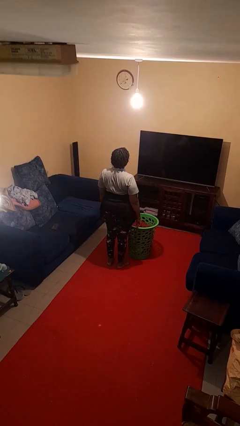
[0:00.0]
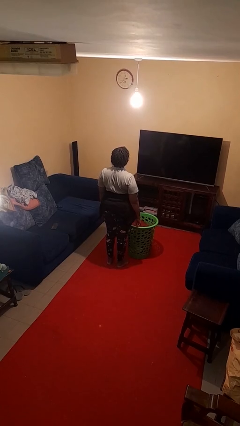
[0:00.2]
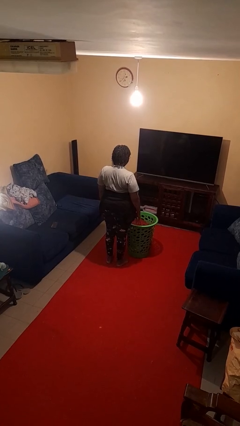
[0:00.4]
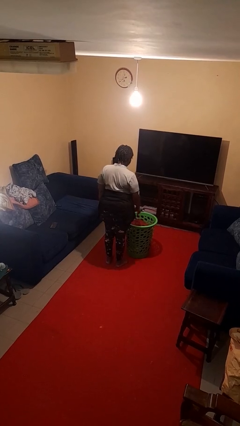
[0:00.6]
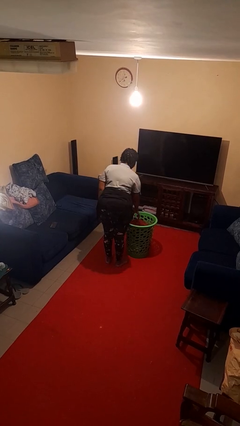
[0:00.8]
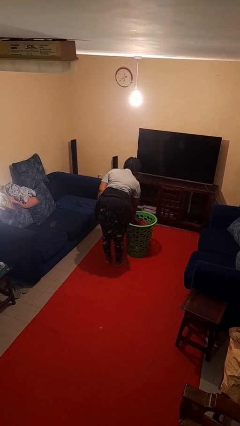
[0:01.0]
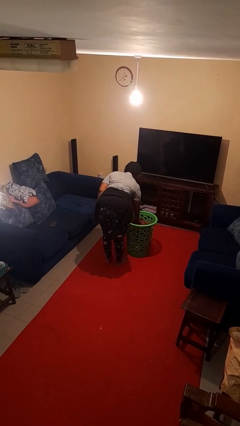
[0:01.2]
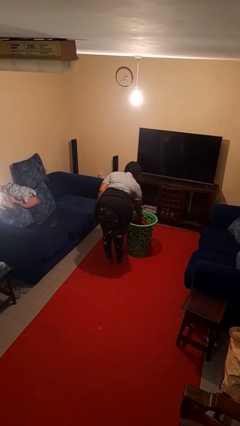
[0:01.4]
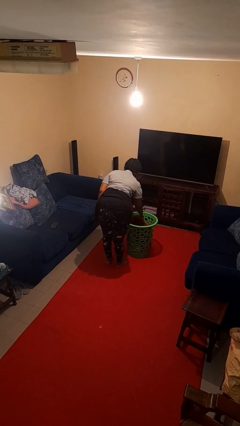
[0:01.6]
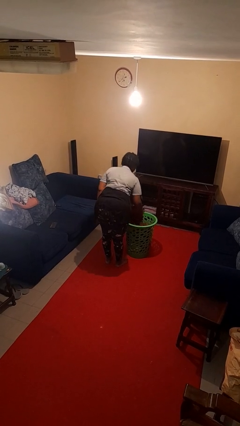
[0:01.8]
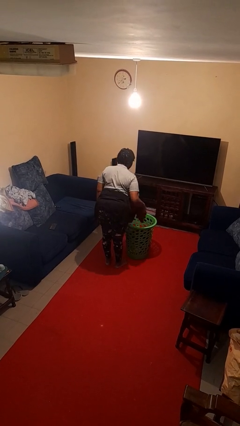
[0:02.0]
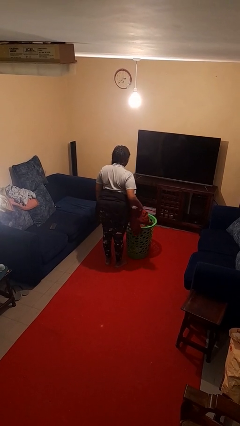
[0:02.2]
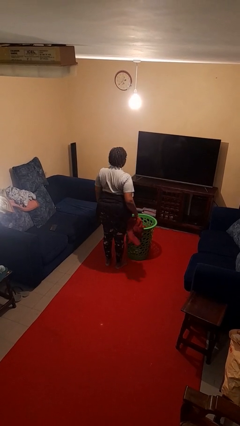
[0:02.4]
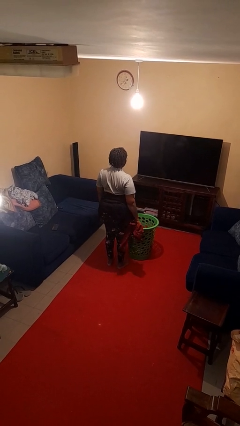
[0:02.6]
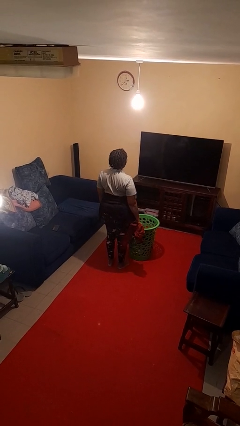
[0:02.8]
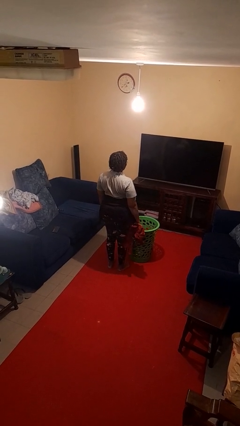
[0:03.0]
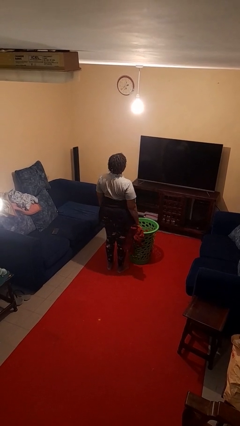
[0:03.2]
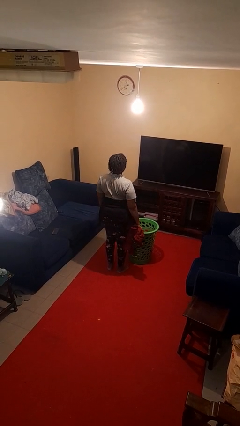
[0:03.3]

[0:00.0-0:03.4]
person takes object from basket

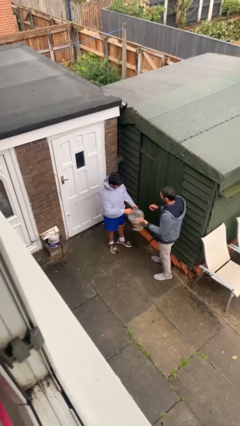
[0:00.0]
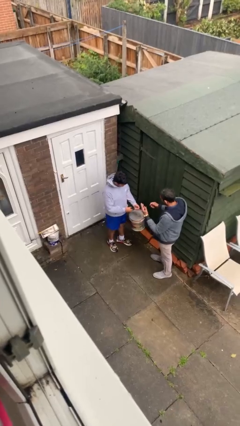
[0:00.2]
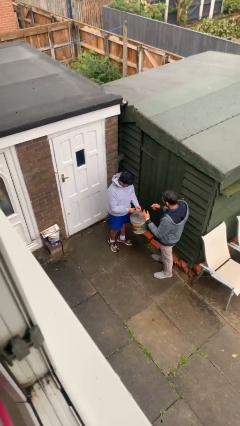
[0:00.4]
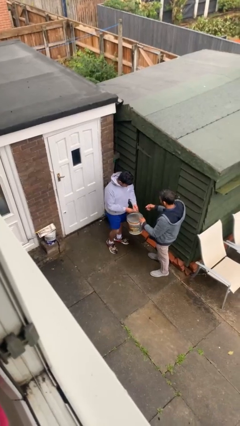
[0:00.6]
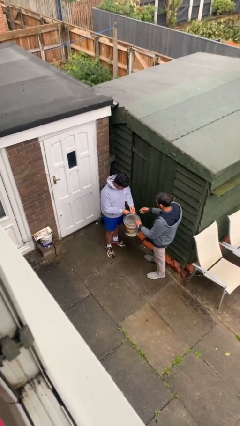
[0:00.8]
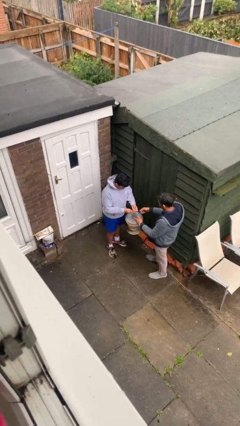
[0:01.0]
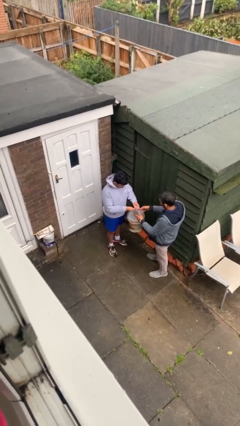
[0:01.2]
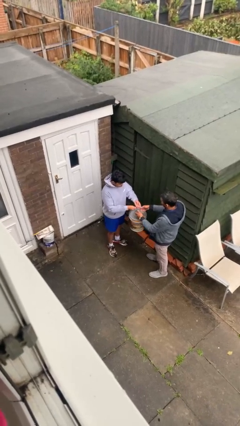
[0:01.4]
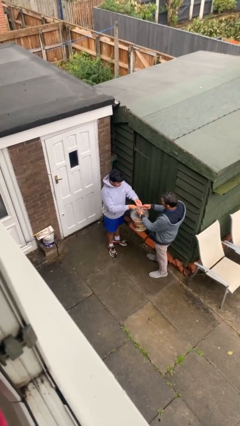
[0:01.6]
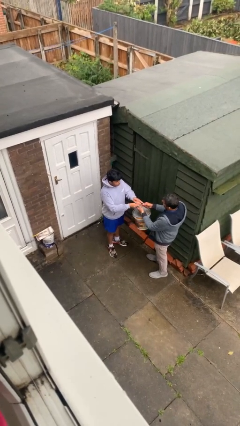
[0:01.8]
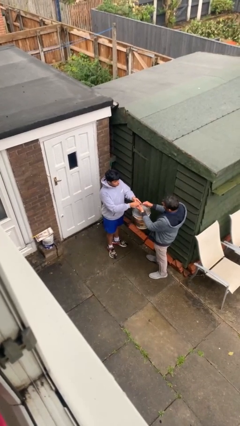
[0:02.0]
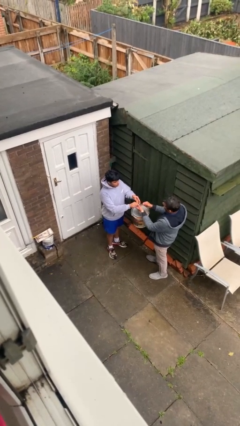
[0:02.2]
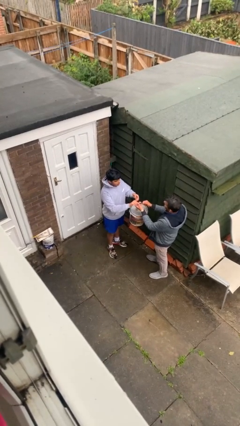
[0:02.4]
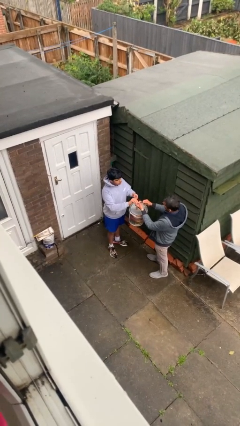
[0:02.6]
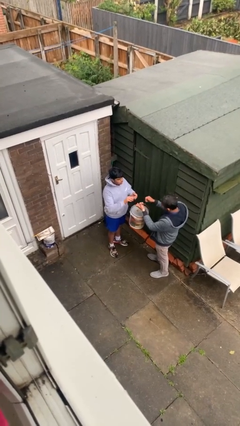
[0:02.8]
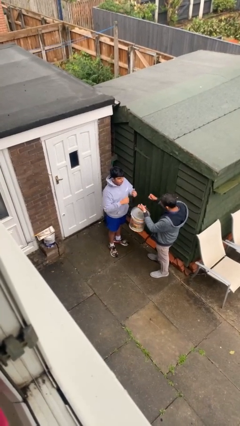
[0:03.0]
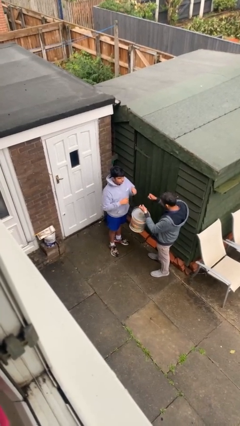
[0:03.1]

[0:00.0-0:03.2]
person transfers object to person

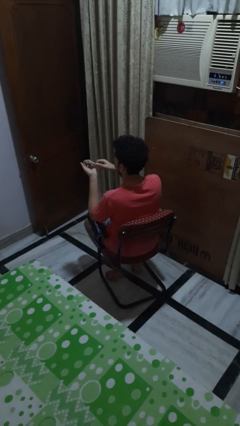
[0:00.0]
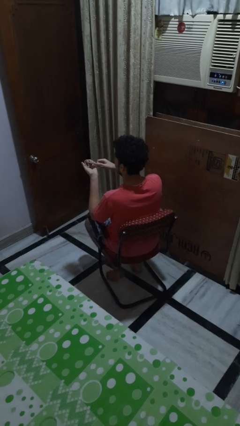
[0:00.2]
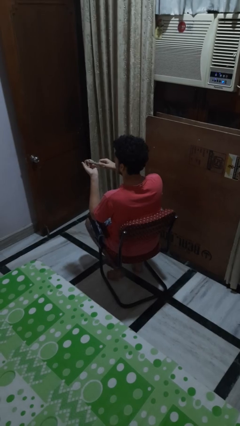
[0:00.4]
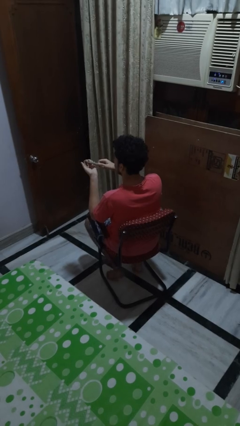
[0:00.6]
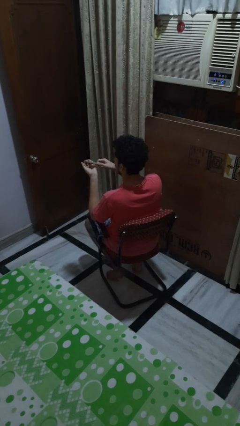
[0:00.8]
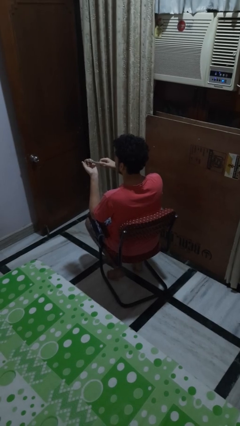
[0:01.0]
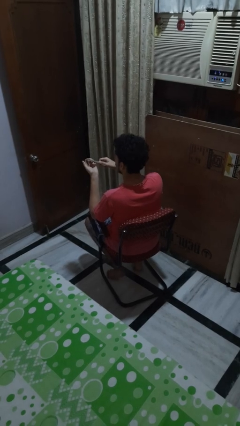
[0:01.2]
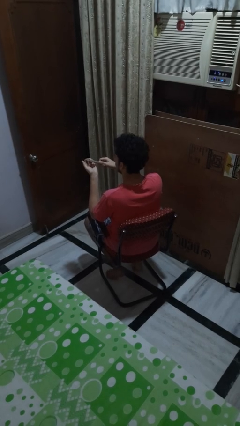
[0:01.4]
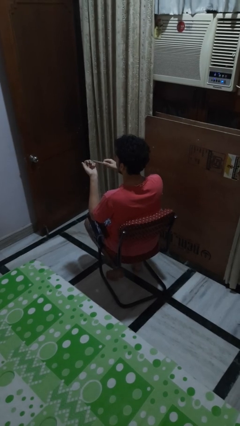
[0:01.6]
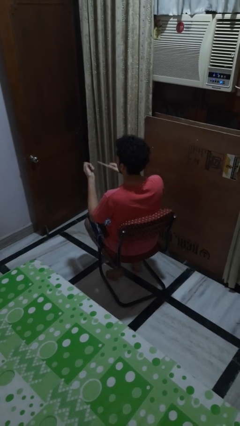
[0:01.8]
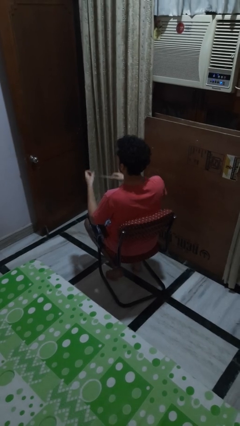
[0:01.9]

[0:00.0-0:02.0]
person files fingernails

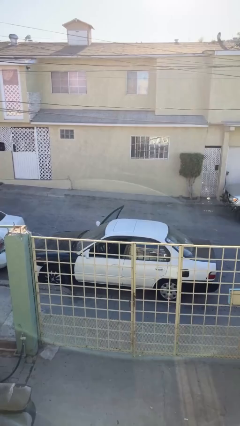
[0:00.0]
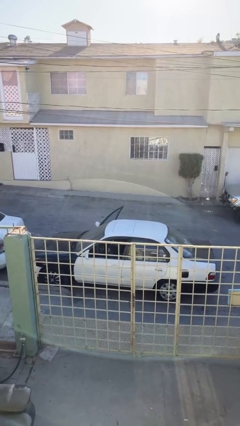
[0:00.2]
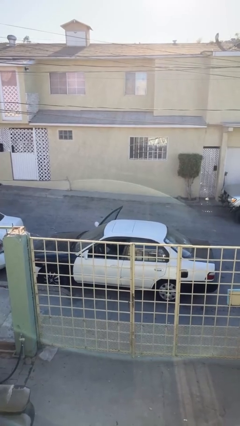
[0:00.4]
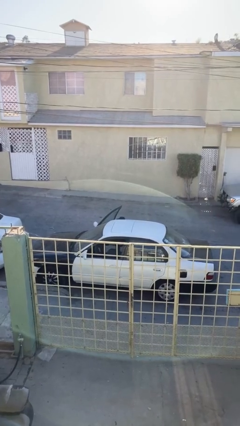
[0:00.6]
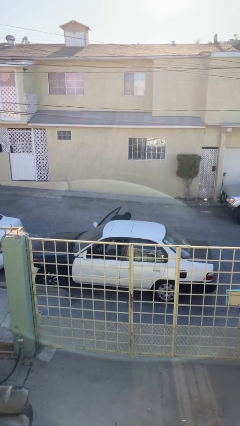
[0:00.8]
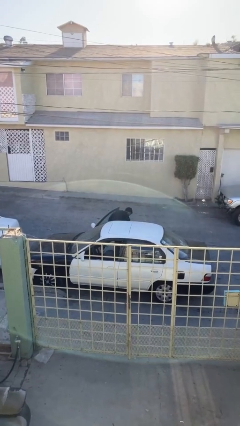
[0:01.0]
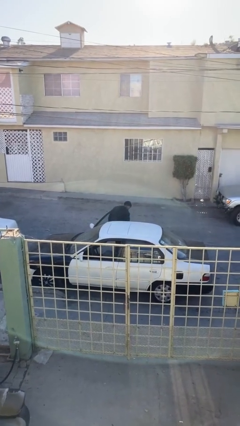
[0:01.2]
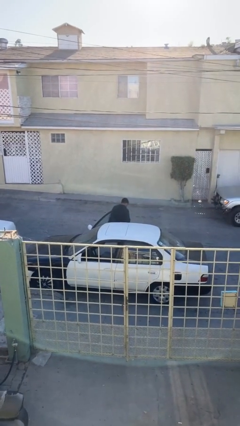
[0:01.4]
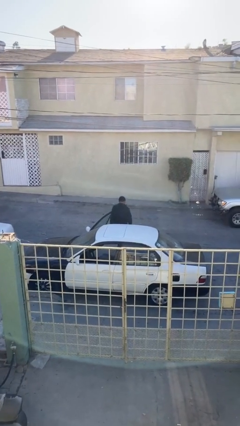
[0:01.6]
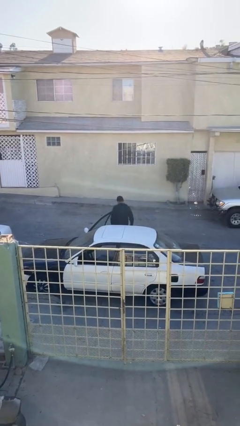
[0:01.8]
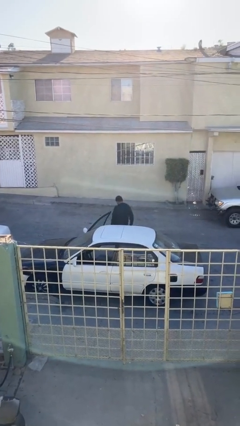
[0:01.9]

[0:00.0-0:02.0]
person exits car

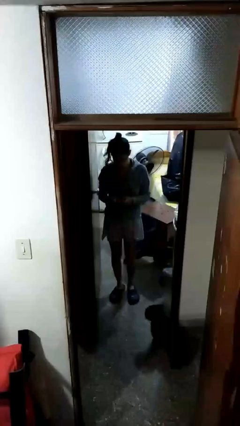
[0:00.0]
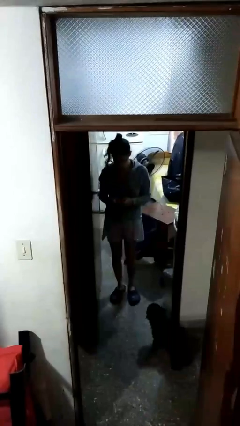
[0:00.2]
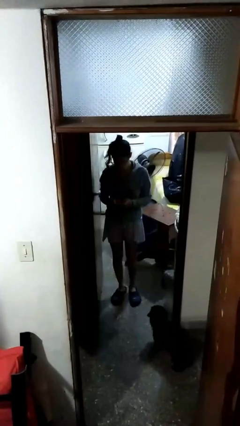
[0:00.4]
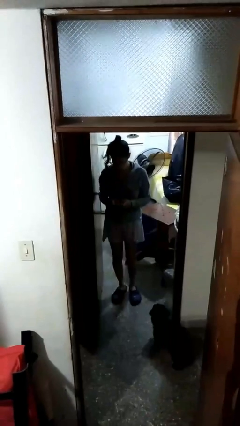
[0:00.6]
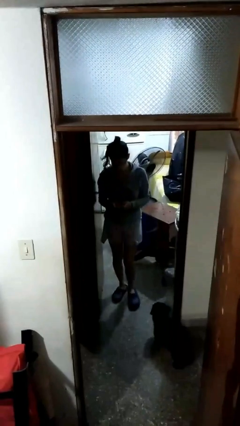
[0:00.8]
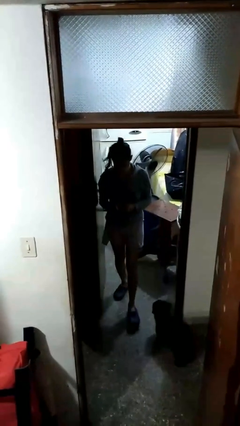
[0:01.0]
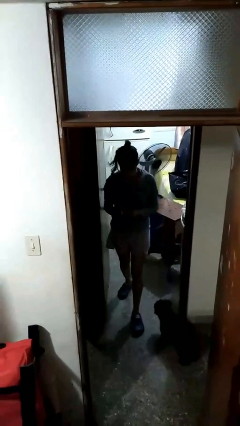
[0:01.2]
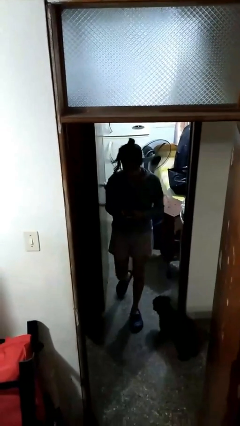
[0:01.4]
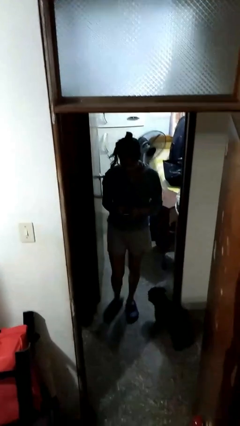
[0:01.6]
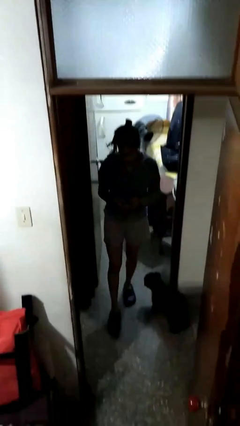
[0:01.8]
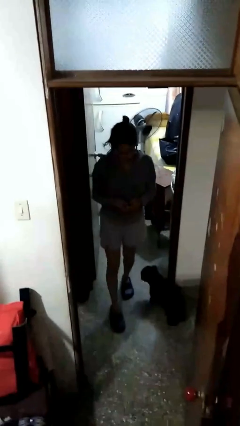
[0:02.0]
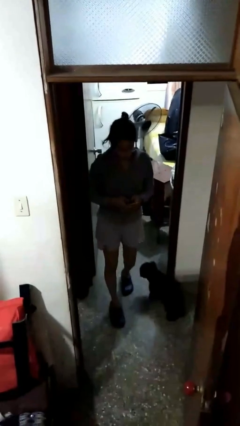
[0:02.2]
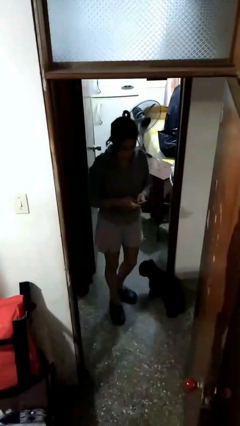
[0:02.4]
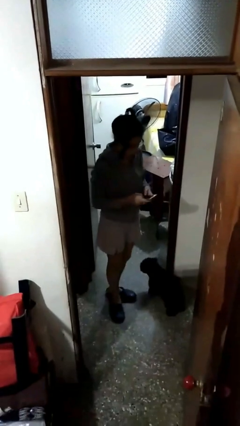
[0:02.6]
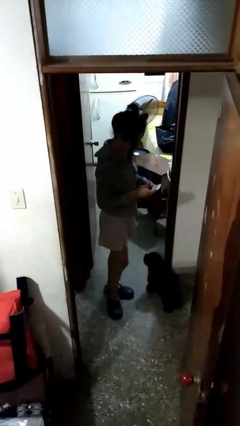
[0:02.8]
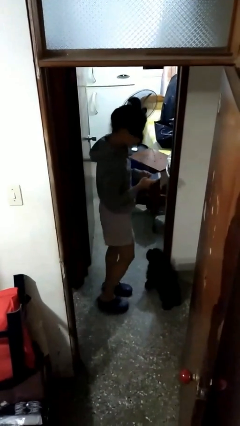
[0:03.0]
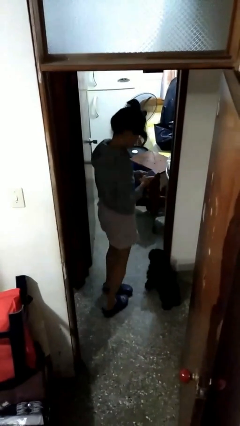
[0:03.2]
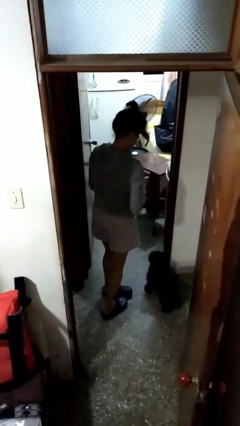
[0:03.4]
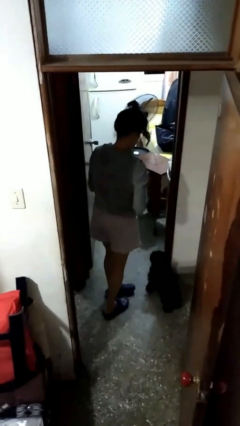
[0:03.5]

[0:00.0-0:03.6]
person enters scene through structure

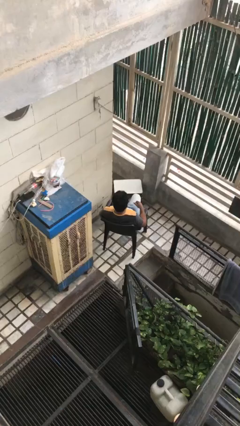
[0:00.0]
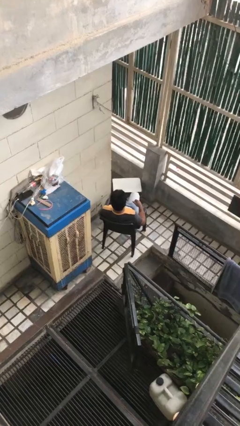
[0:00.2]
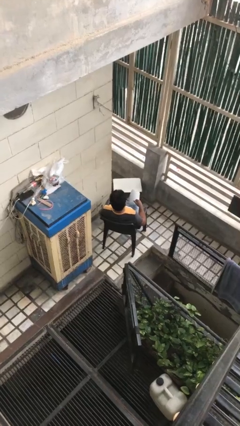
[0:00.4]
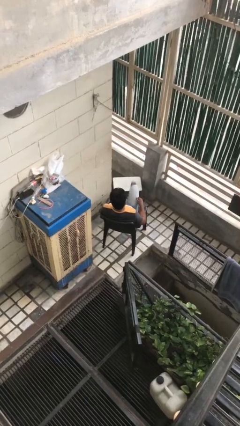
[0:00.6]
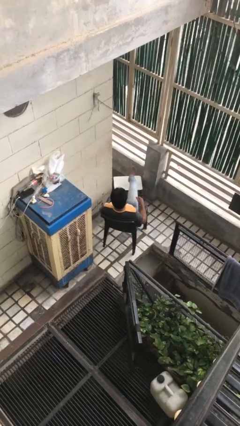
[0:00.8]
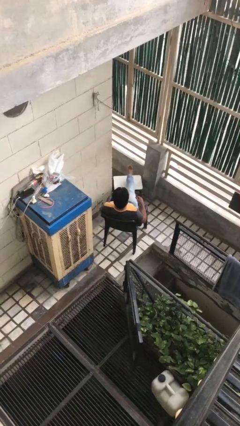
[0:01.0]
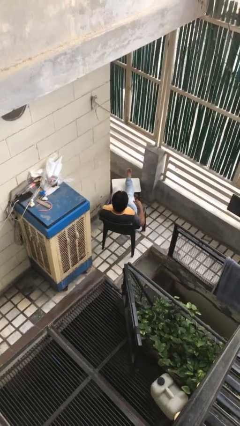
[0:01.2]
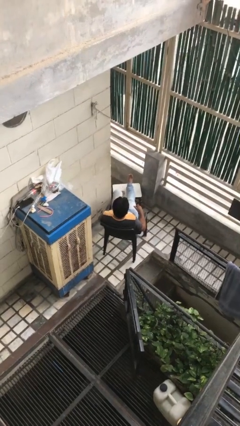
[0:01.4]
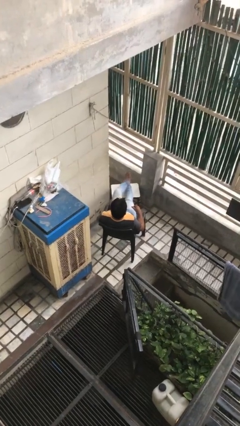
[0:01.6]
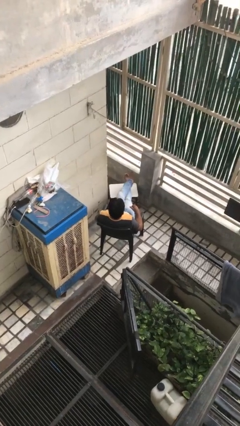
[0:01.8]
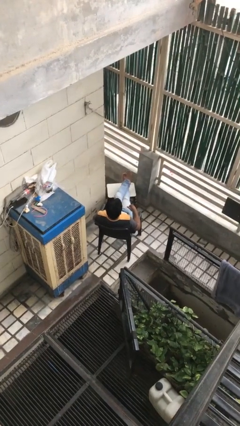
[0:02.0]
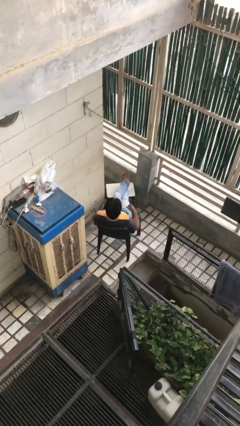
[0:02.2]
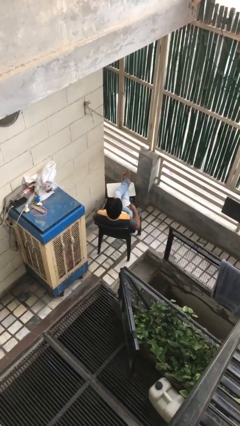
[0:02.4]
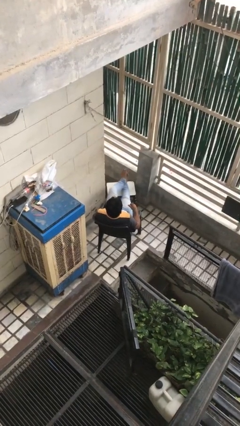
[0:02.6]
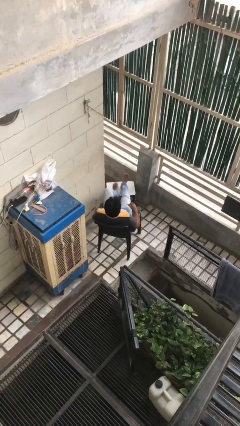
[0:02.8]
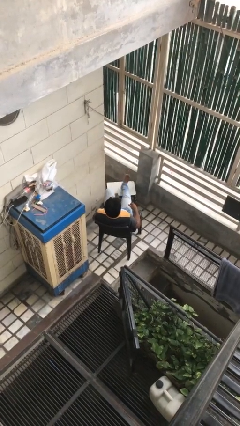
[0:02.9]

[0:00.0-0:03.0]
person puts feet up

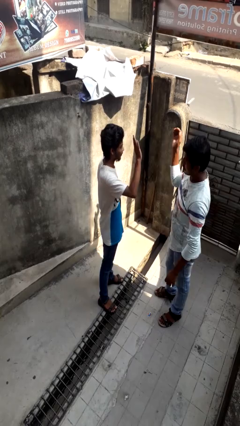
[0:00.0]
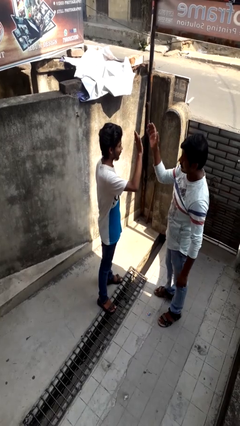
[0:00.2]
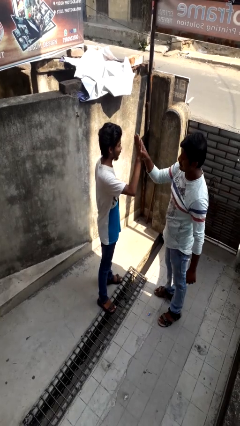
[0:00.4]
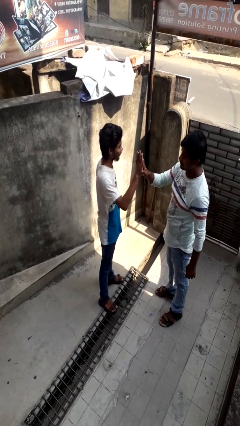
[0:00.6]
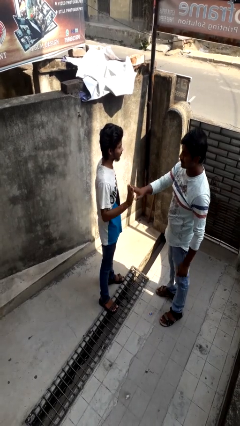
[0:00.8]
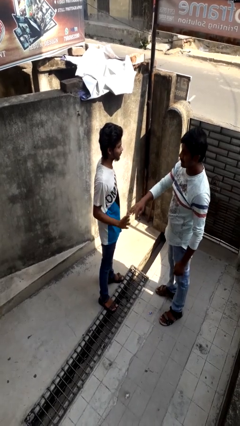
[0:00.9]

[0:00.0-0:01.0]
person highfives hand
